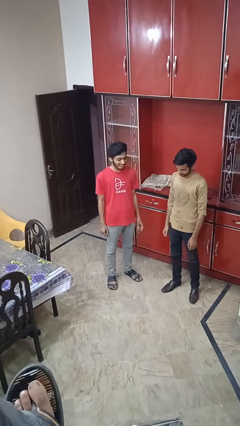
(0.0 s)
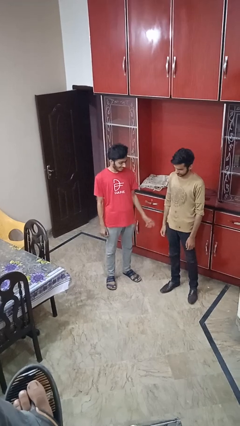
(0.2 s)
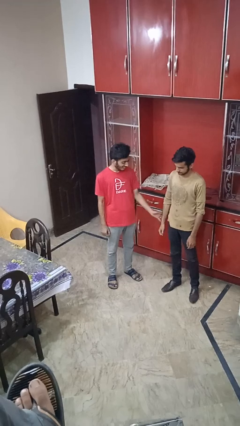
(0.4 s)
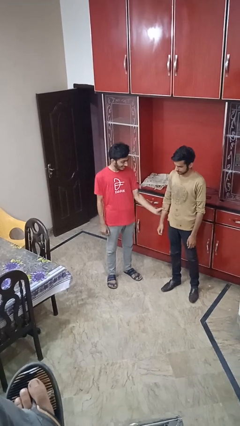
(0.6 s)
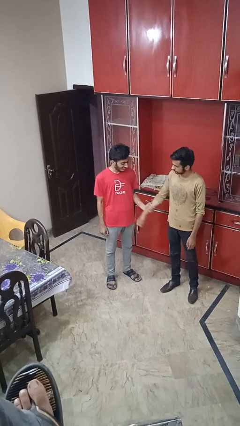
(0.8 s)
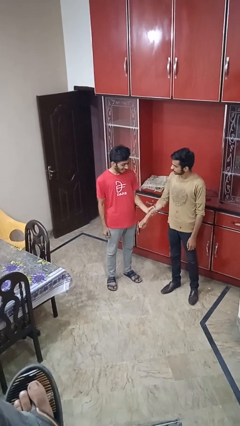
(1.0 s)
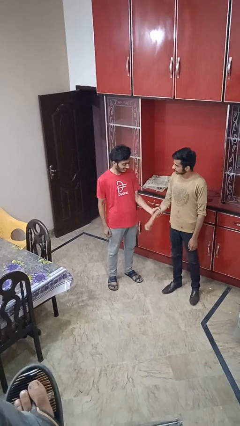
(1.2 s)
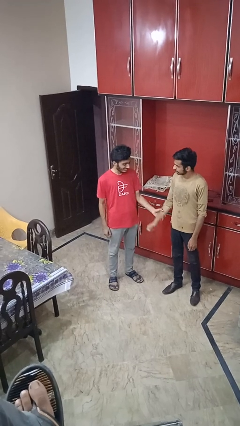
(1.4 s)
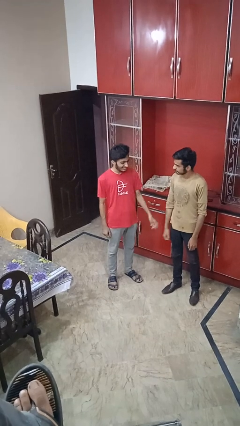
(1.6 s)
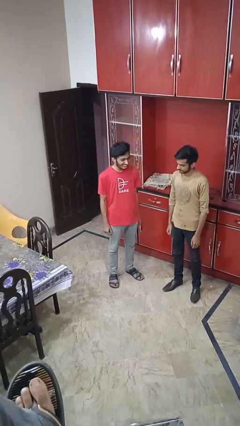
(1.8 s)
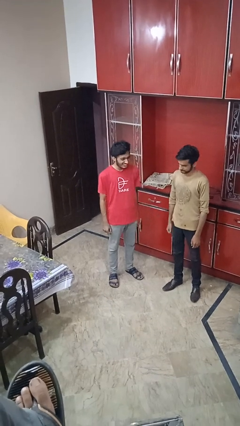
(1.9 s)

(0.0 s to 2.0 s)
person grabs person by forearm

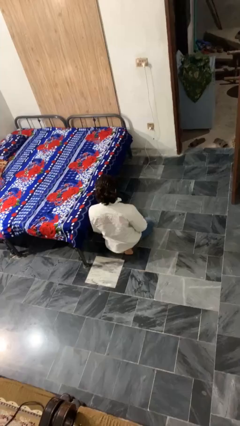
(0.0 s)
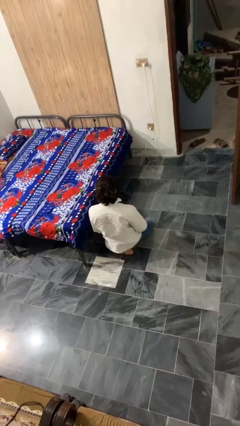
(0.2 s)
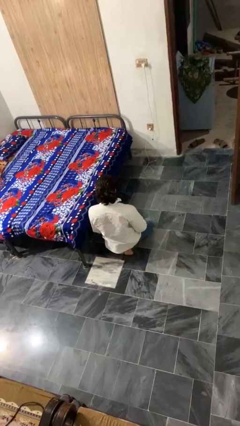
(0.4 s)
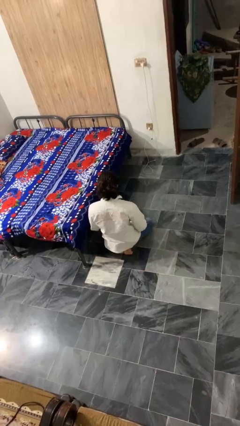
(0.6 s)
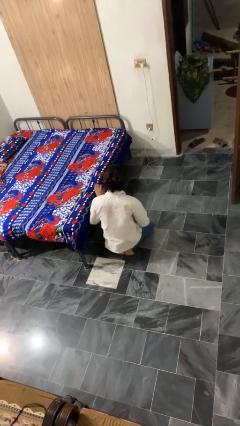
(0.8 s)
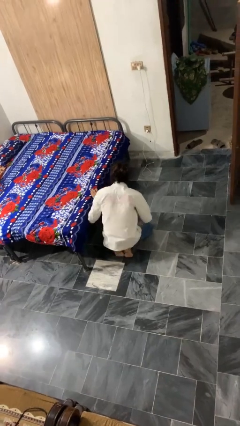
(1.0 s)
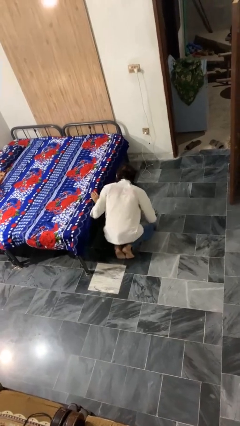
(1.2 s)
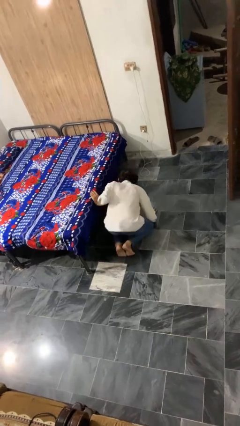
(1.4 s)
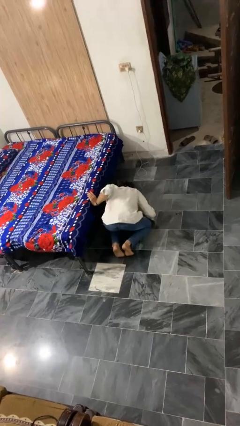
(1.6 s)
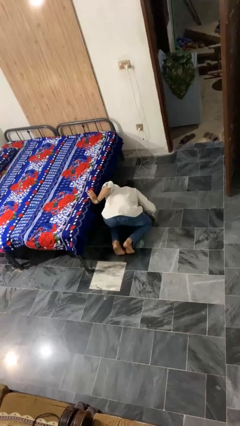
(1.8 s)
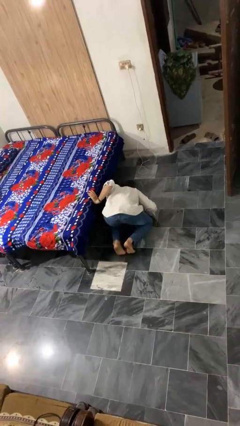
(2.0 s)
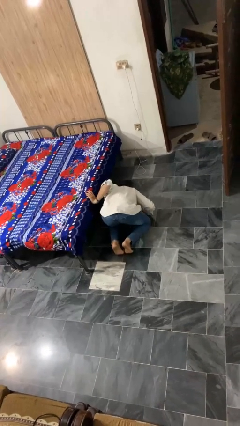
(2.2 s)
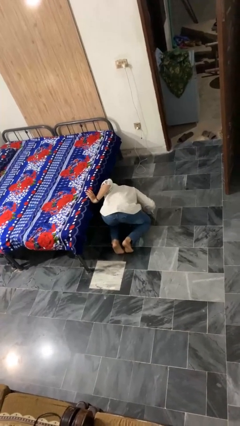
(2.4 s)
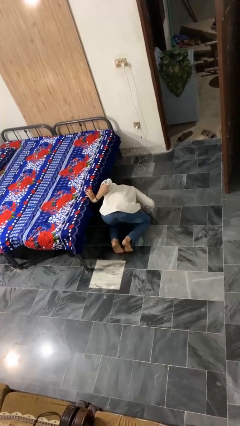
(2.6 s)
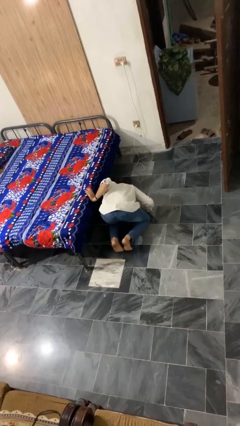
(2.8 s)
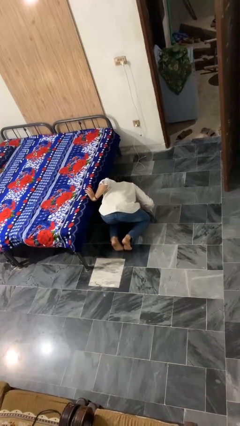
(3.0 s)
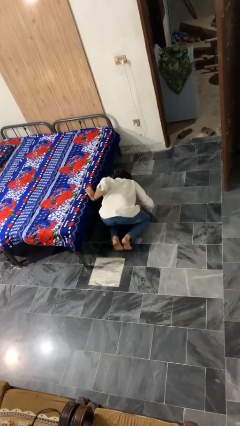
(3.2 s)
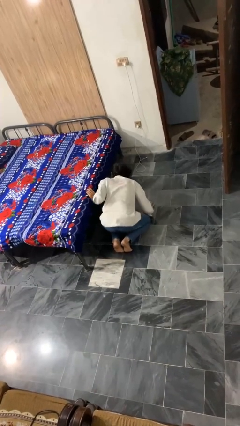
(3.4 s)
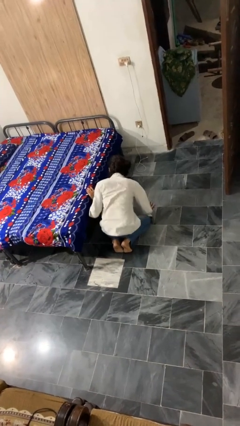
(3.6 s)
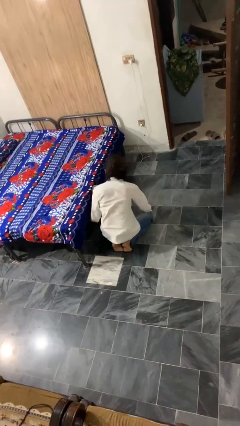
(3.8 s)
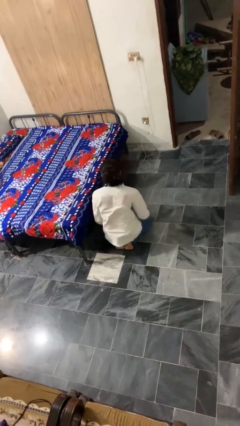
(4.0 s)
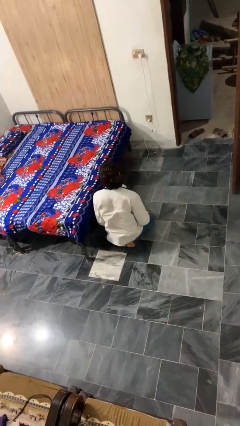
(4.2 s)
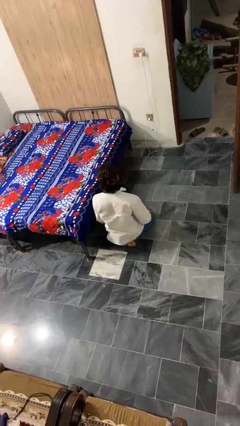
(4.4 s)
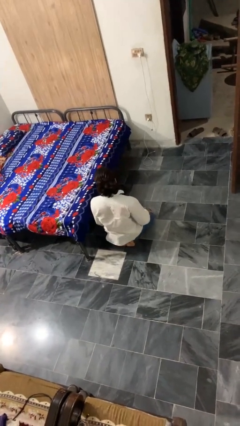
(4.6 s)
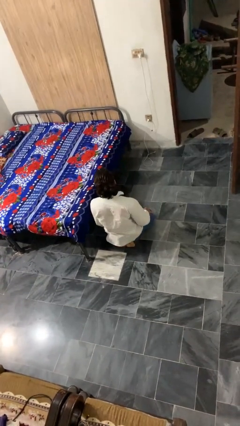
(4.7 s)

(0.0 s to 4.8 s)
person searches under bed

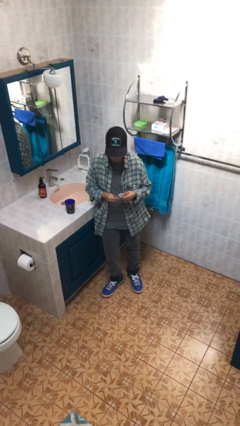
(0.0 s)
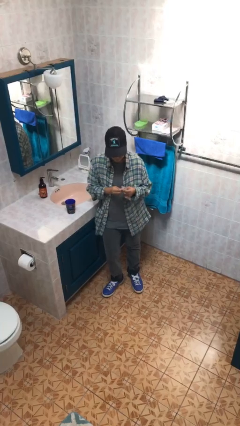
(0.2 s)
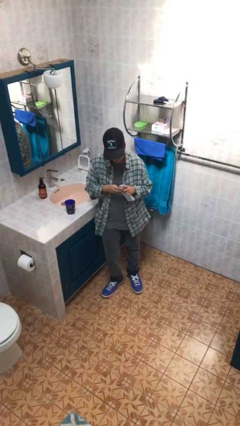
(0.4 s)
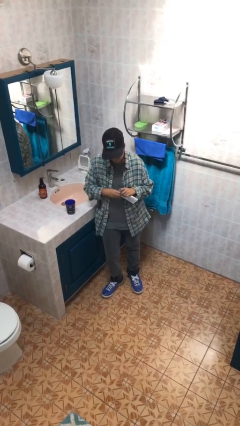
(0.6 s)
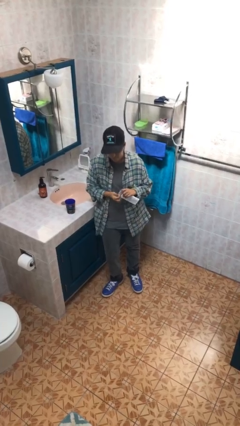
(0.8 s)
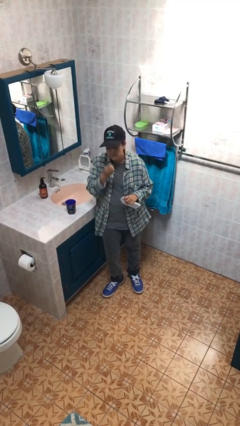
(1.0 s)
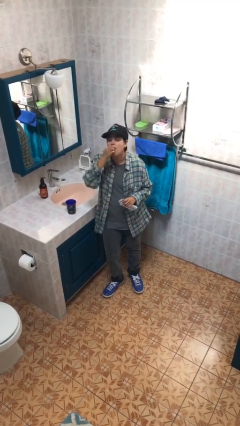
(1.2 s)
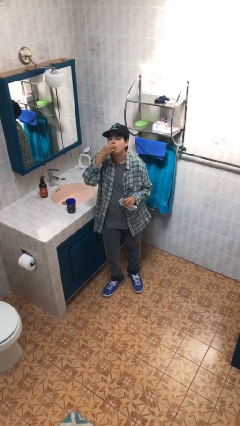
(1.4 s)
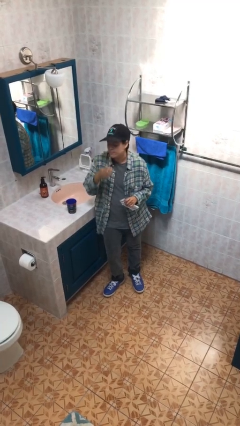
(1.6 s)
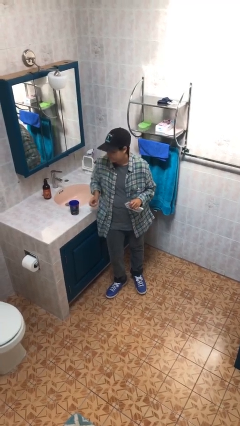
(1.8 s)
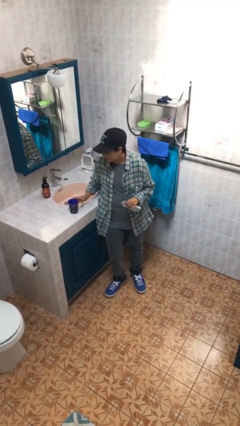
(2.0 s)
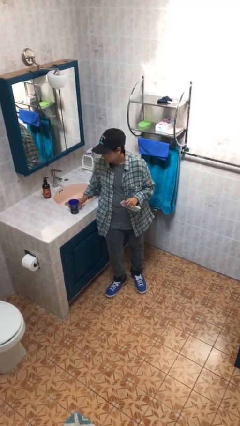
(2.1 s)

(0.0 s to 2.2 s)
person takes medicine pills

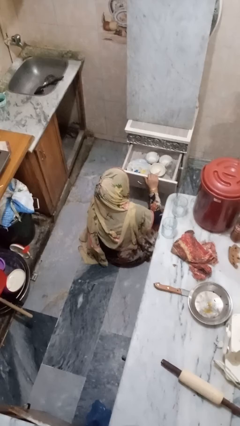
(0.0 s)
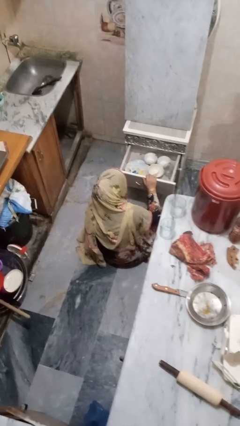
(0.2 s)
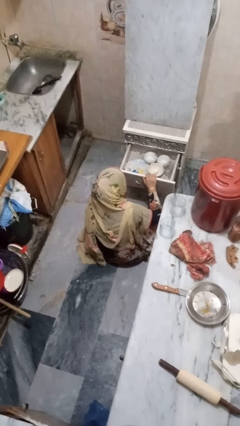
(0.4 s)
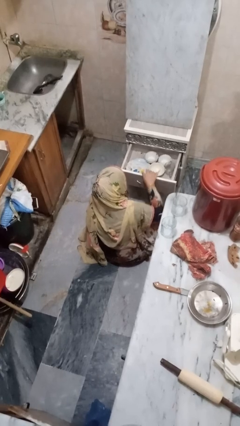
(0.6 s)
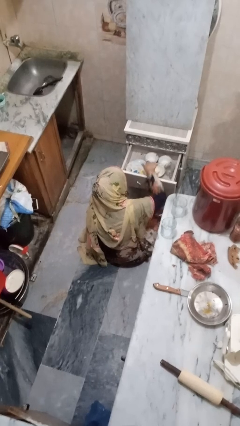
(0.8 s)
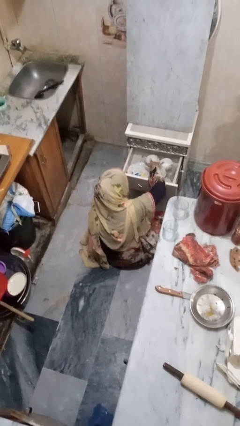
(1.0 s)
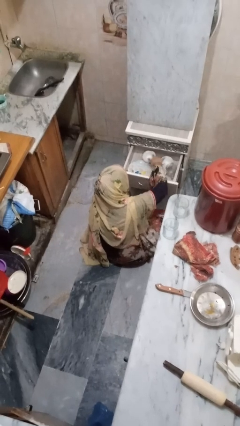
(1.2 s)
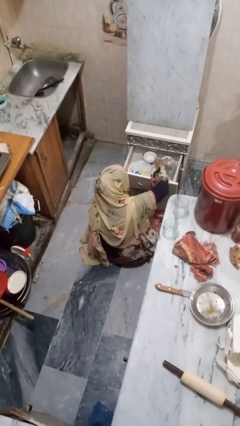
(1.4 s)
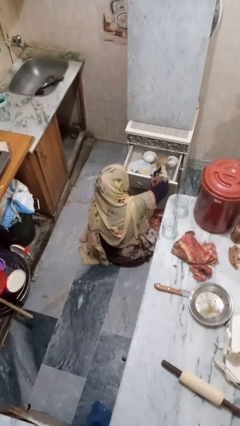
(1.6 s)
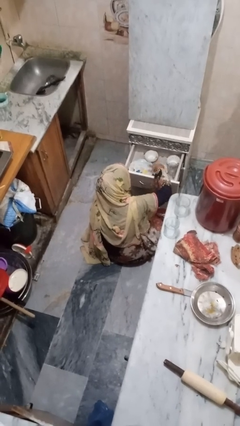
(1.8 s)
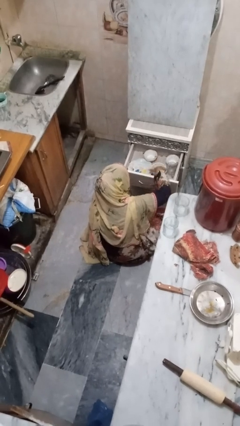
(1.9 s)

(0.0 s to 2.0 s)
person searches in kitchen drawer

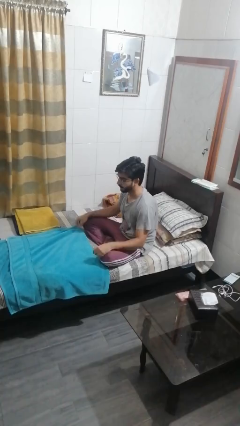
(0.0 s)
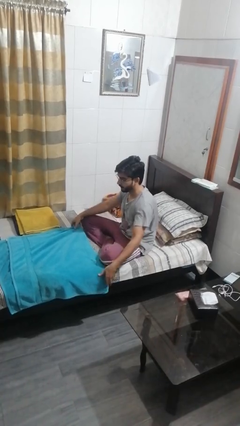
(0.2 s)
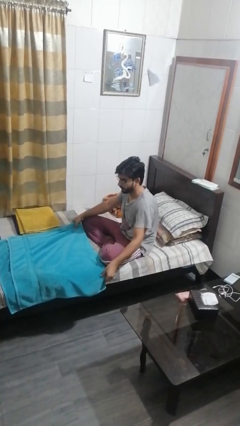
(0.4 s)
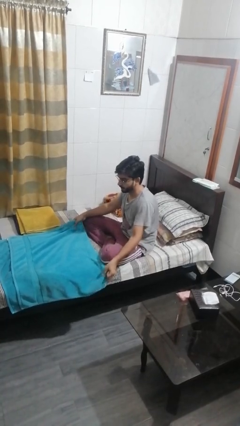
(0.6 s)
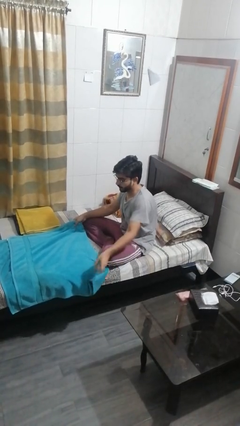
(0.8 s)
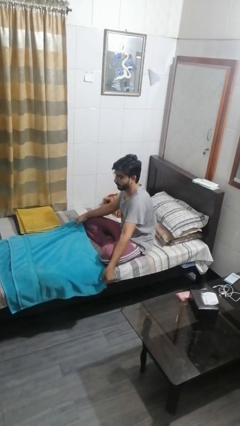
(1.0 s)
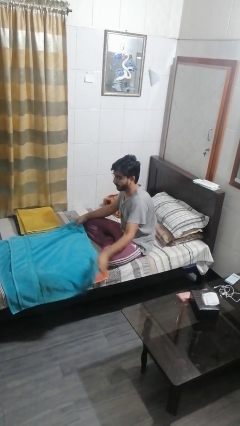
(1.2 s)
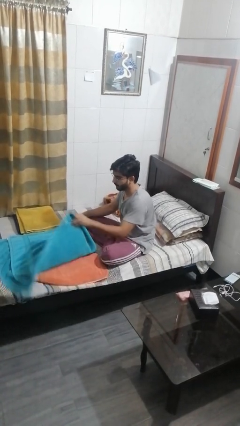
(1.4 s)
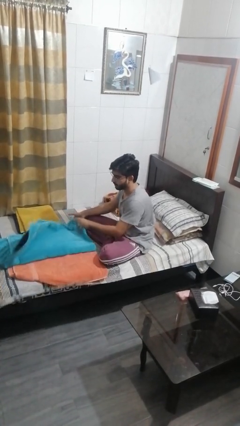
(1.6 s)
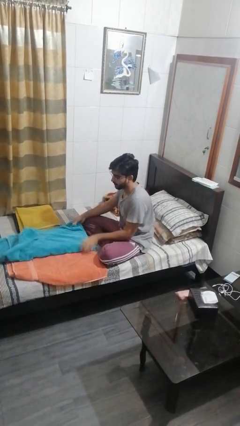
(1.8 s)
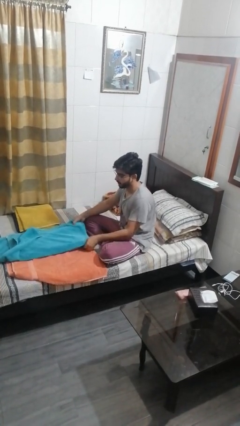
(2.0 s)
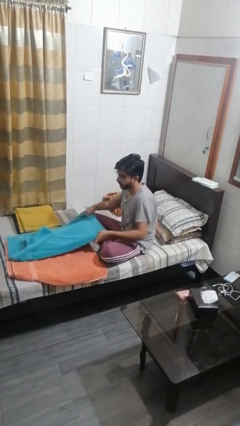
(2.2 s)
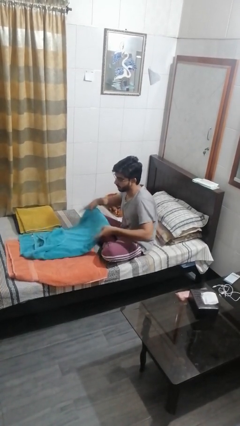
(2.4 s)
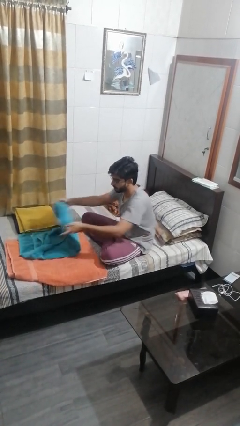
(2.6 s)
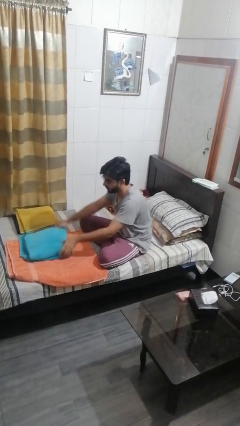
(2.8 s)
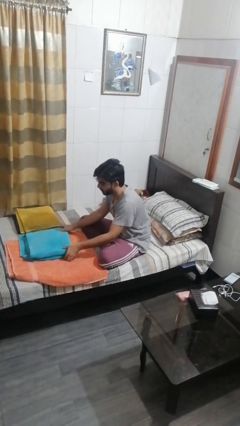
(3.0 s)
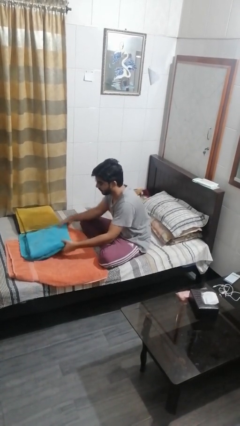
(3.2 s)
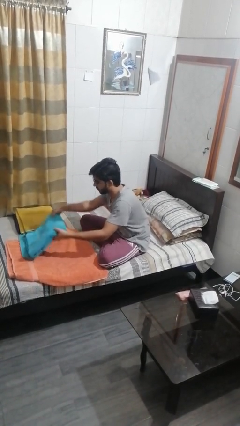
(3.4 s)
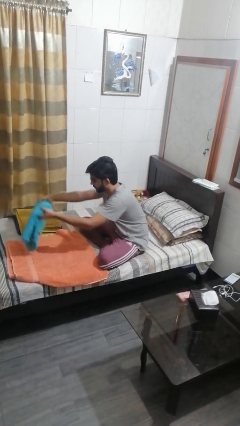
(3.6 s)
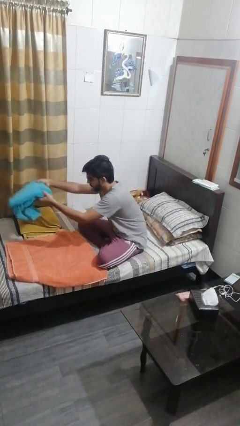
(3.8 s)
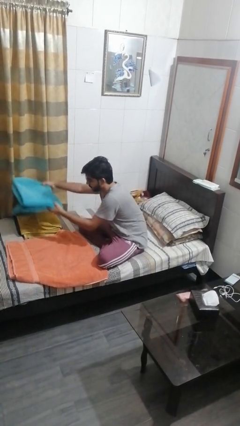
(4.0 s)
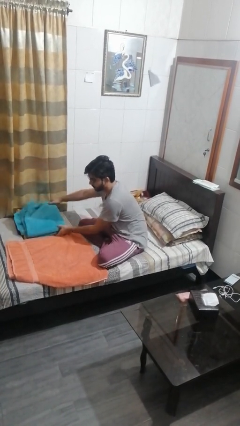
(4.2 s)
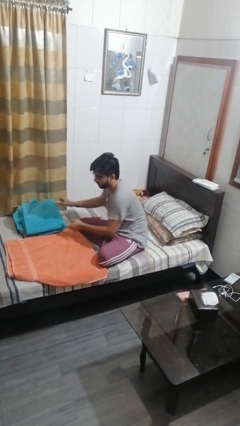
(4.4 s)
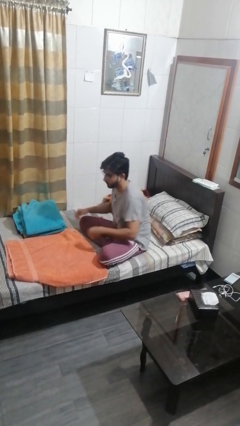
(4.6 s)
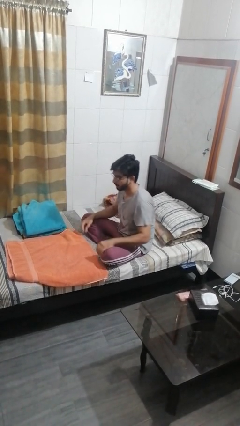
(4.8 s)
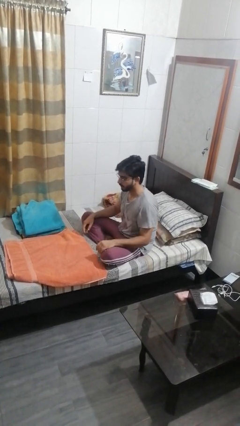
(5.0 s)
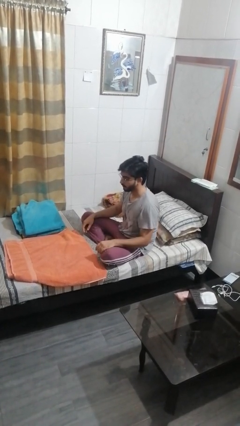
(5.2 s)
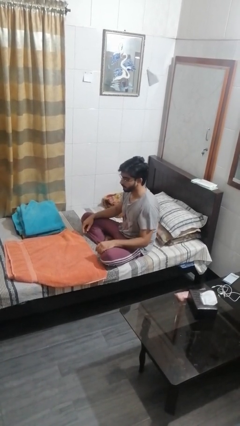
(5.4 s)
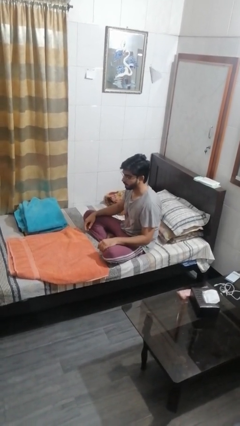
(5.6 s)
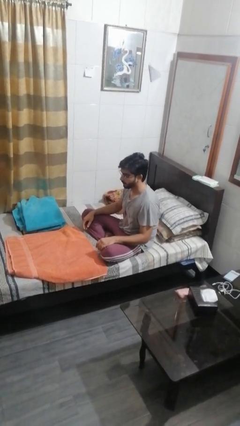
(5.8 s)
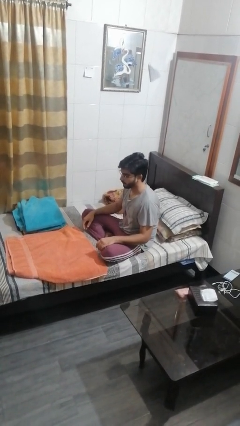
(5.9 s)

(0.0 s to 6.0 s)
person folds towel

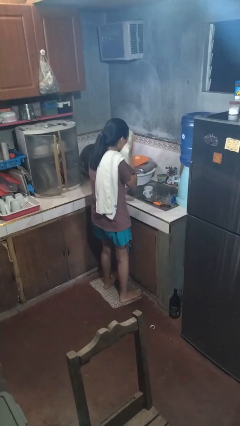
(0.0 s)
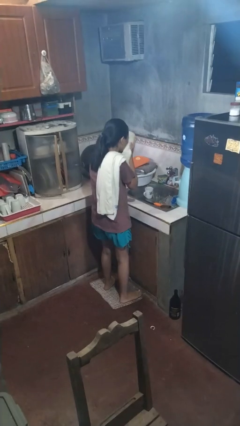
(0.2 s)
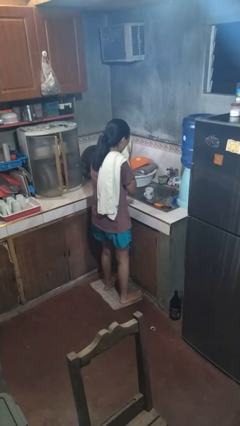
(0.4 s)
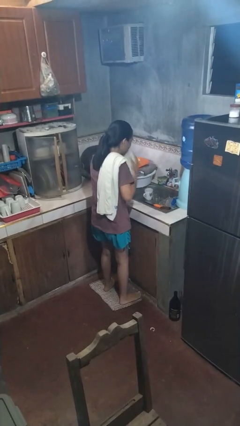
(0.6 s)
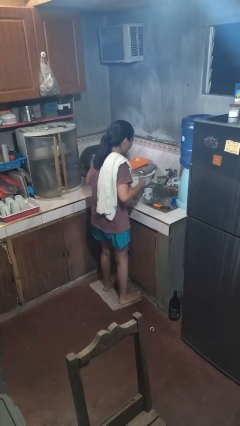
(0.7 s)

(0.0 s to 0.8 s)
person dries face with towel
